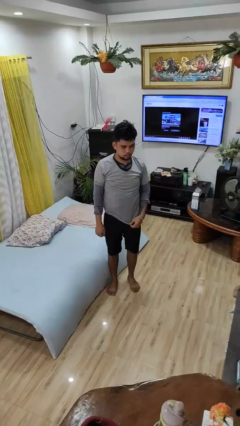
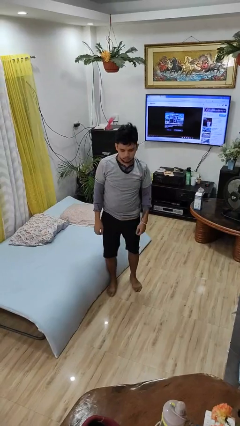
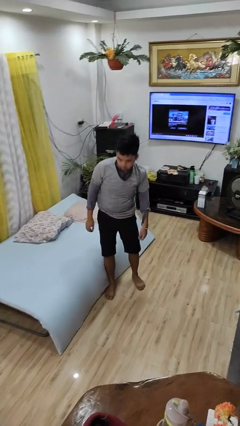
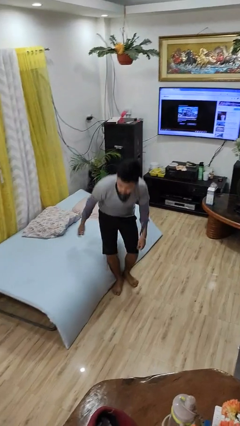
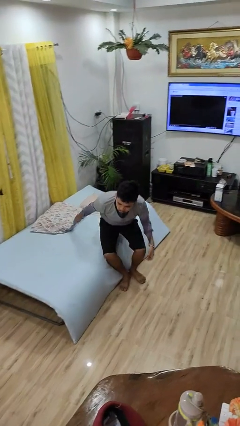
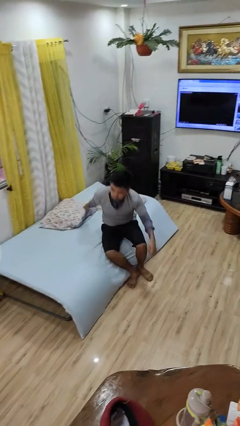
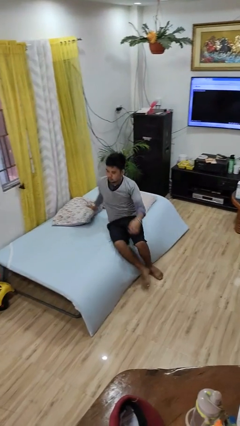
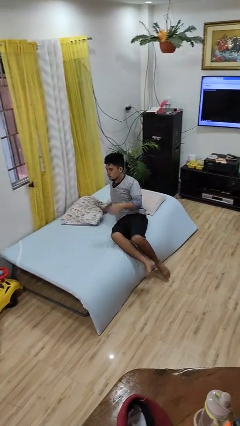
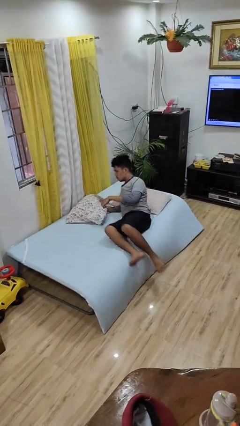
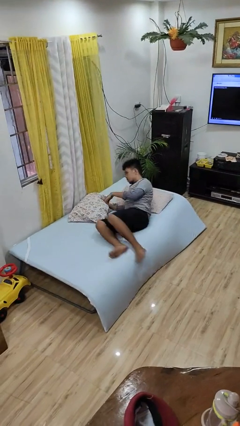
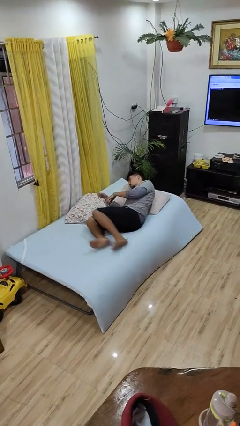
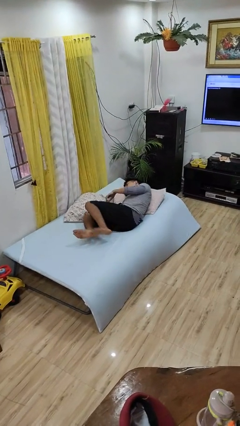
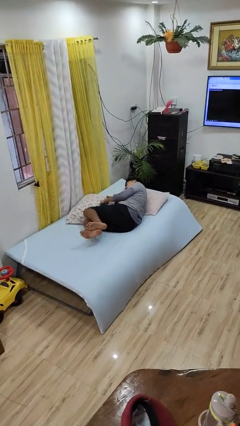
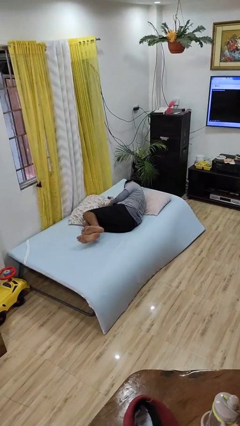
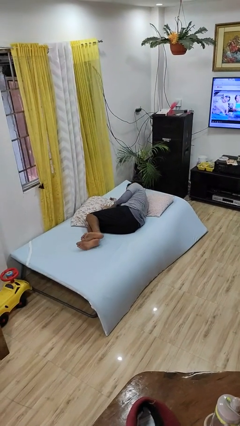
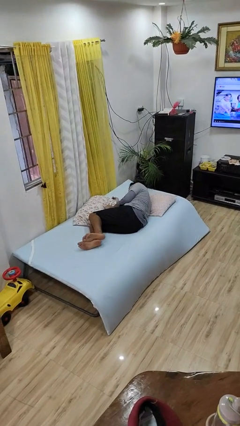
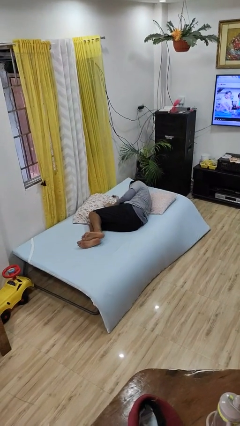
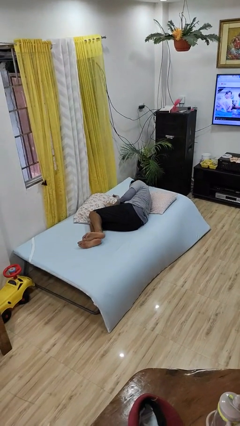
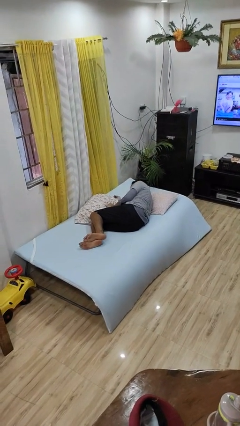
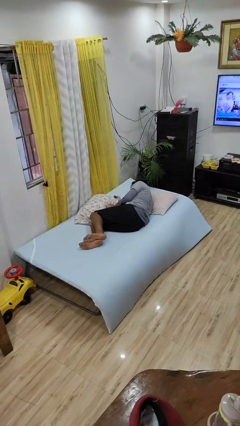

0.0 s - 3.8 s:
person lies down on bed

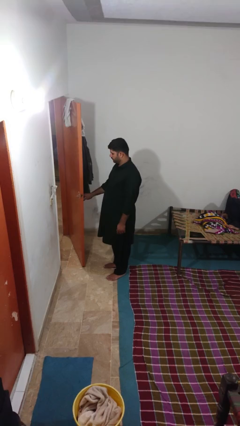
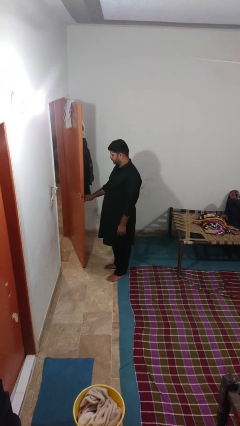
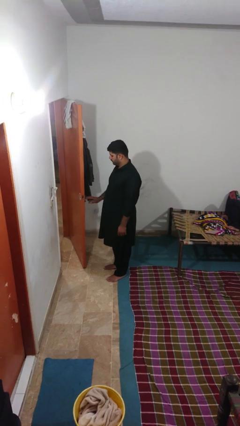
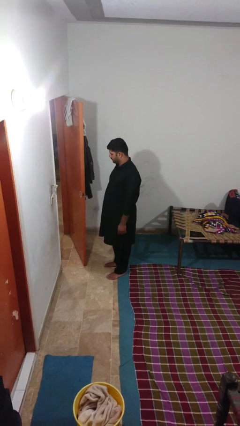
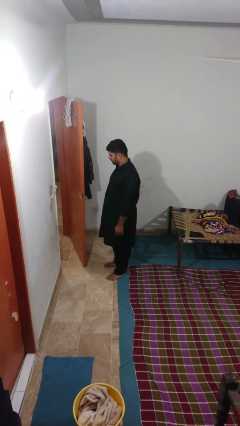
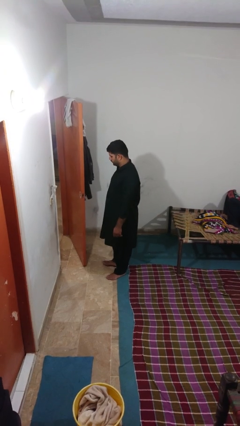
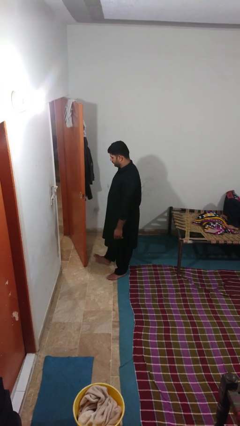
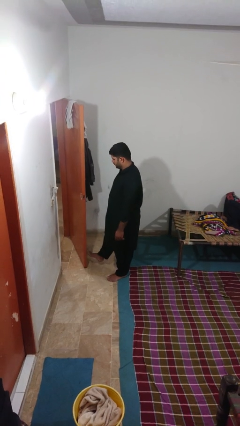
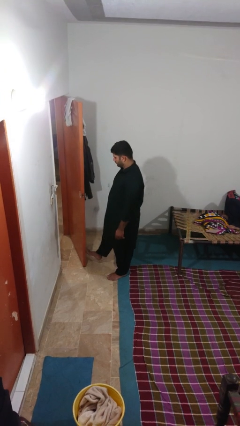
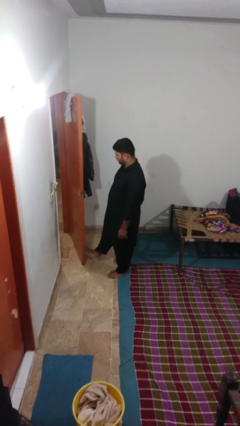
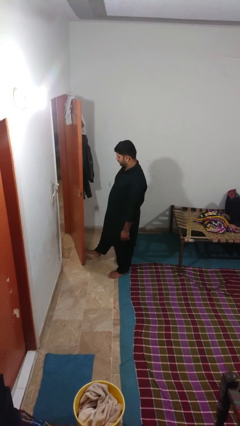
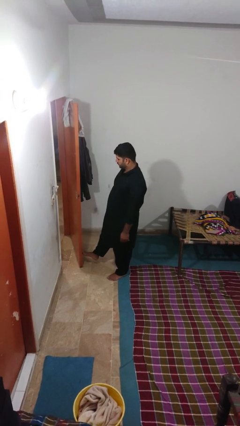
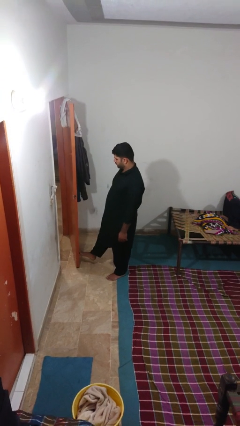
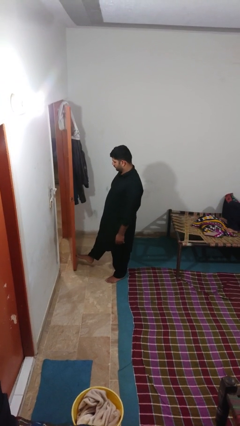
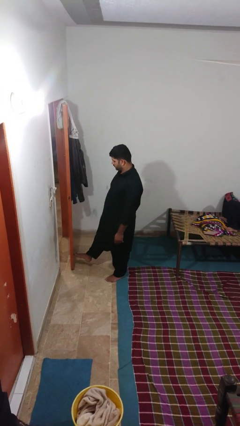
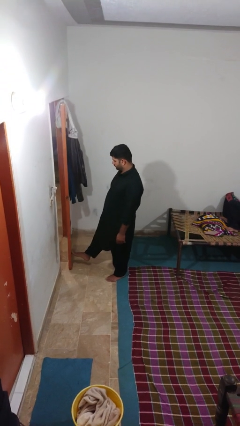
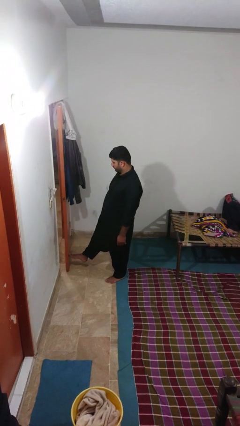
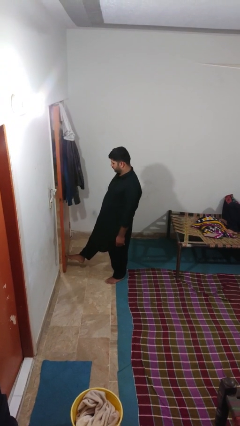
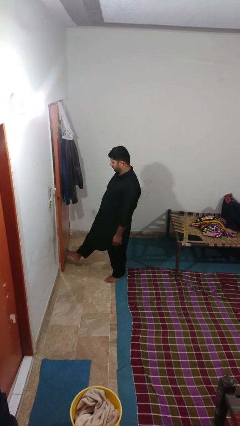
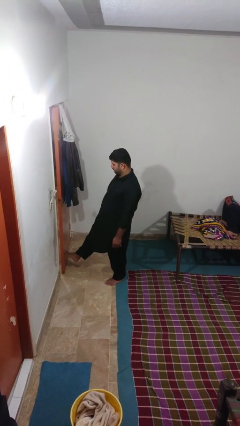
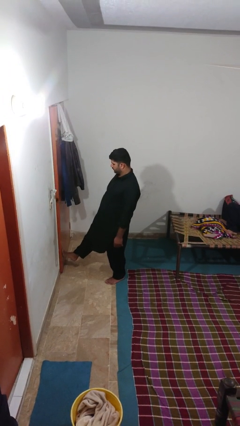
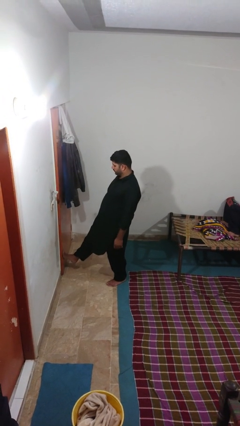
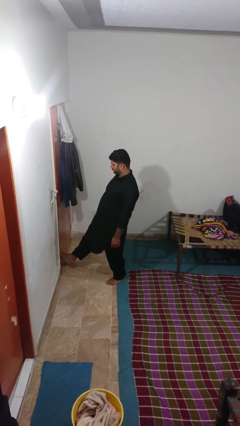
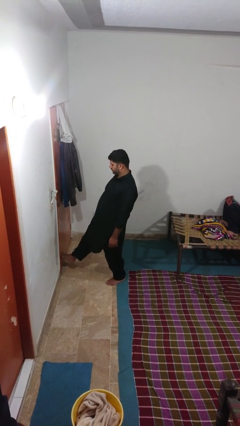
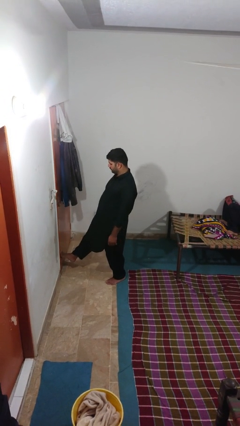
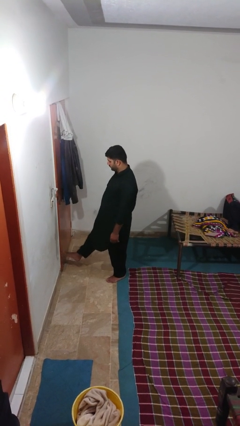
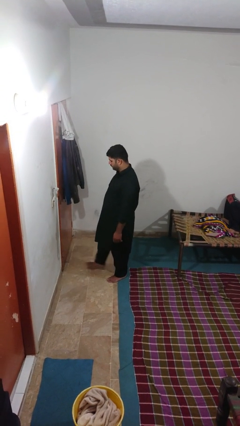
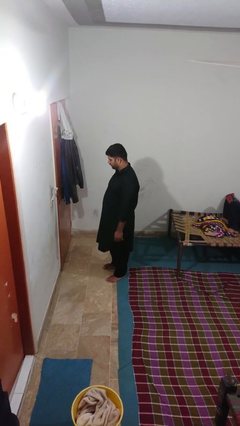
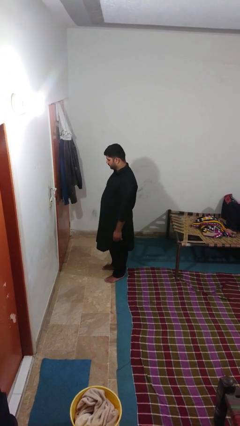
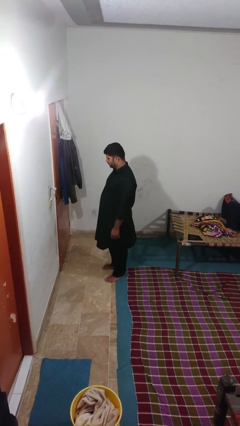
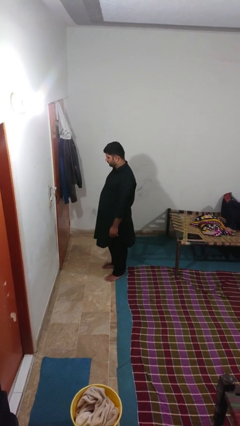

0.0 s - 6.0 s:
person closes door with foot

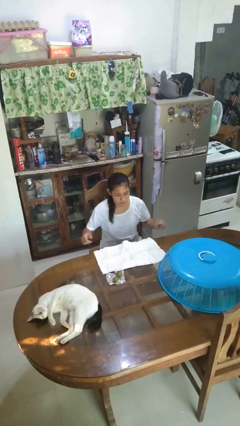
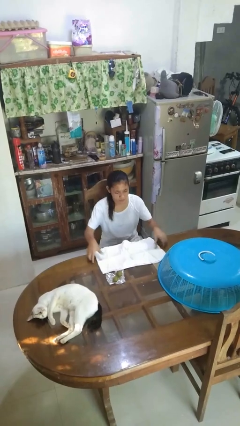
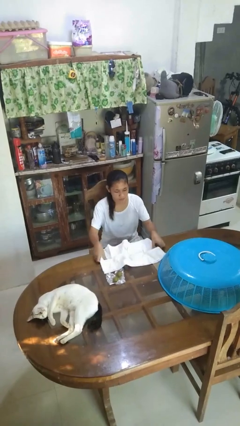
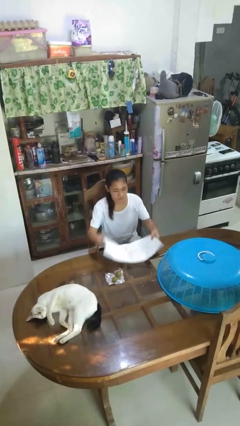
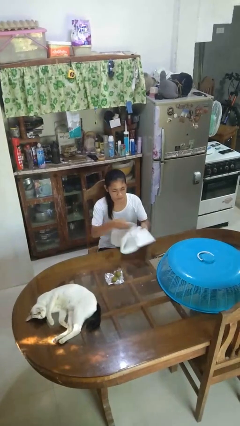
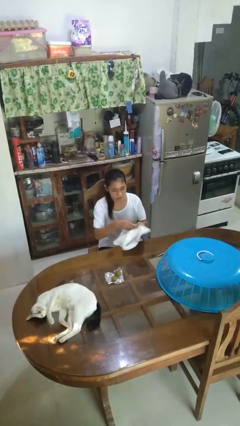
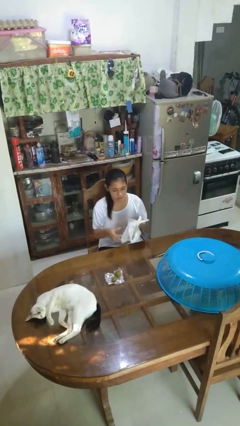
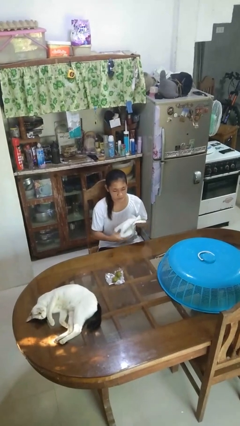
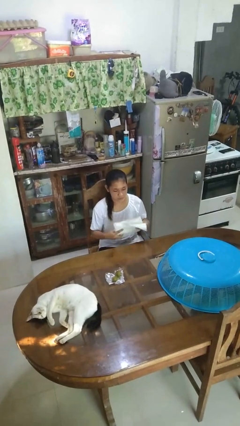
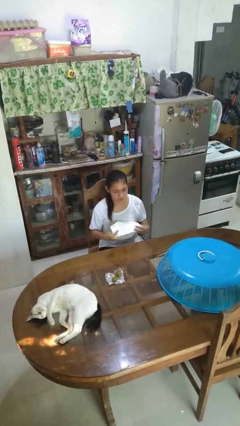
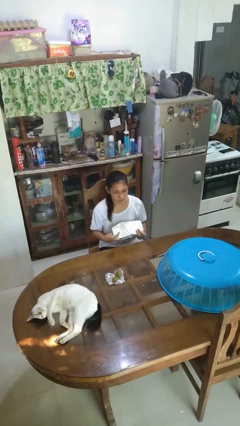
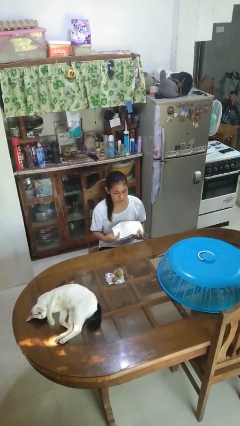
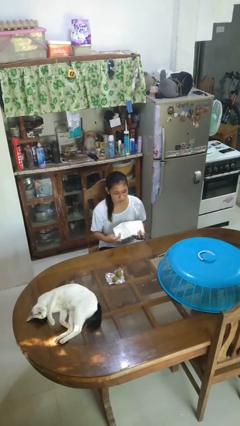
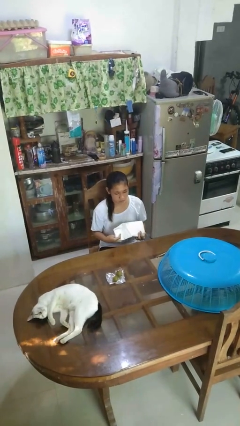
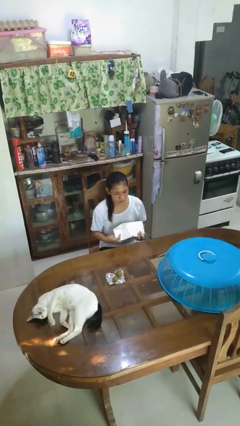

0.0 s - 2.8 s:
person folds tablecloth

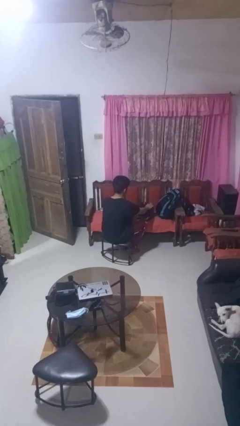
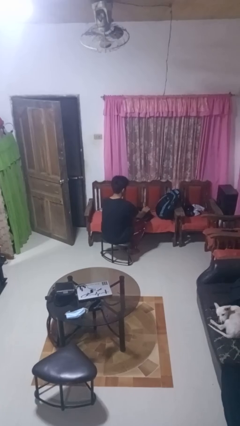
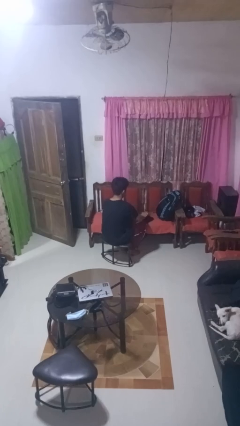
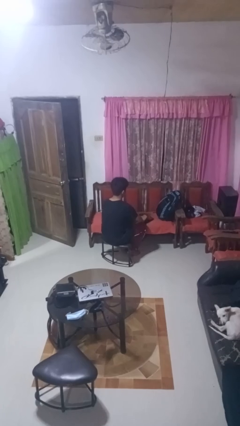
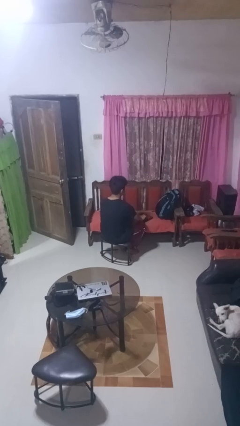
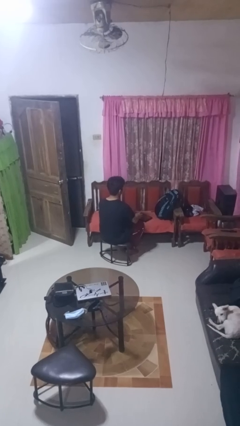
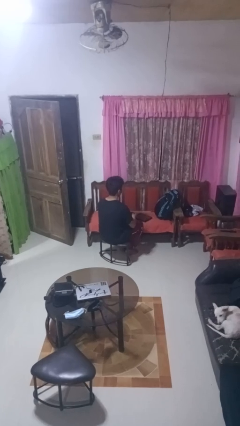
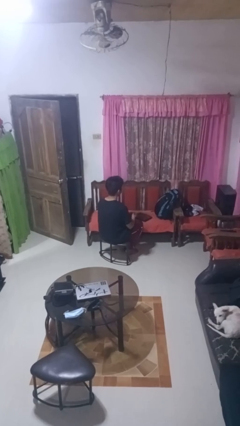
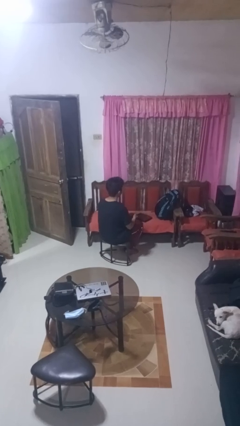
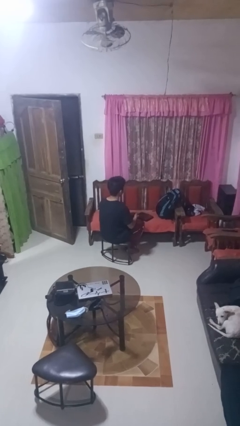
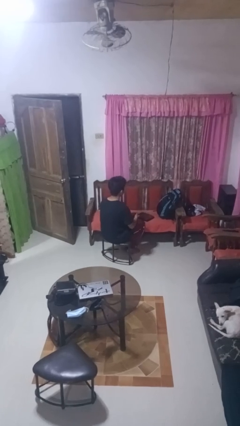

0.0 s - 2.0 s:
person closes laptop

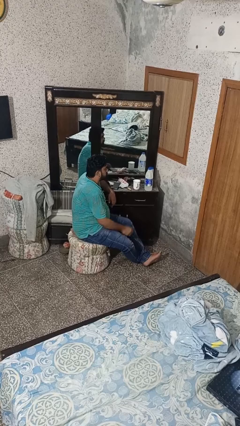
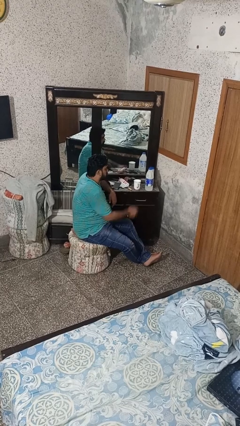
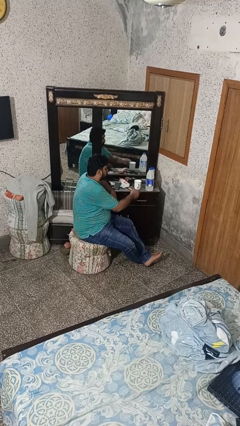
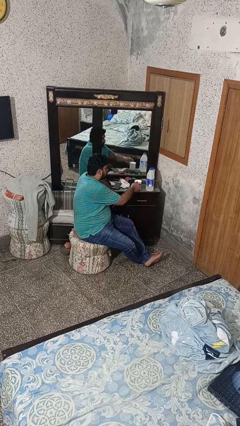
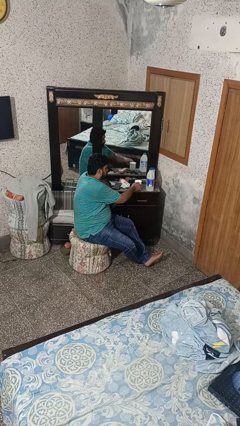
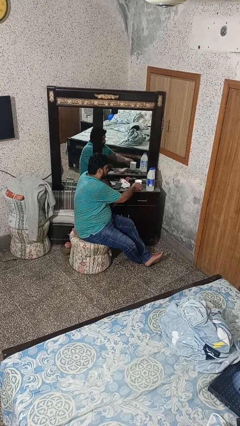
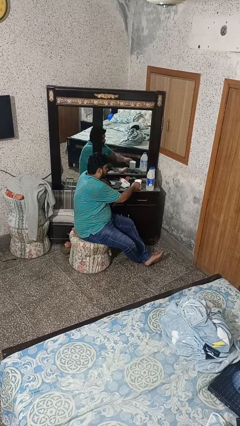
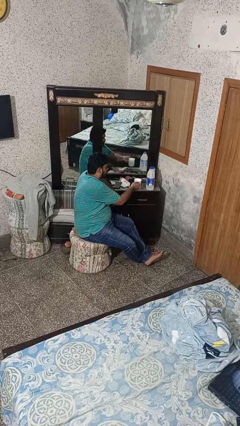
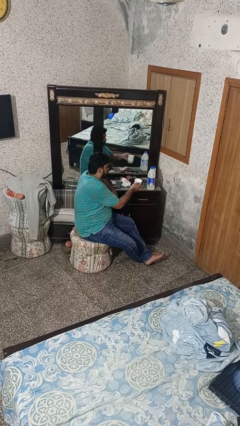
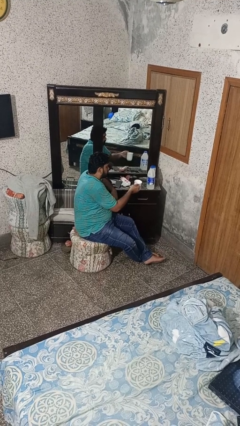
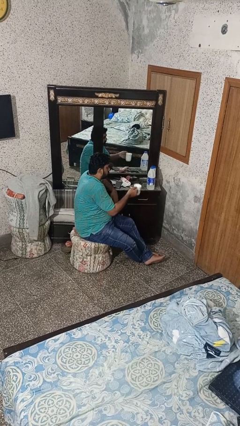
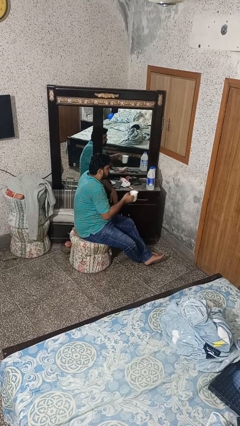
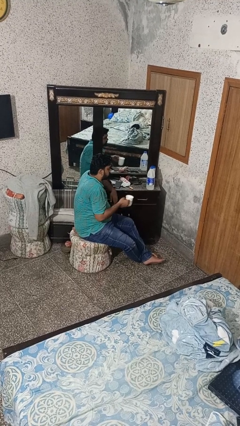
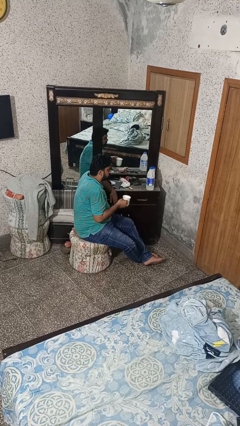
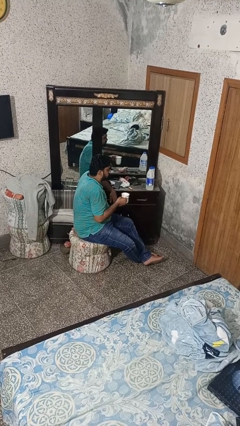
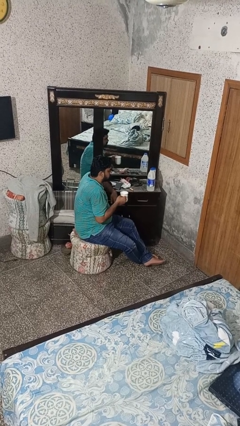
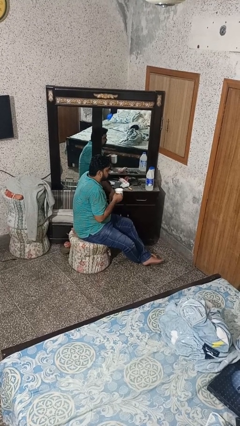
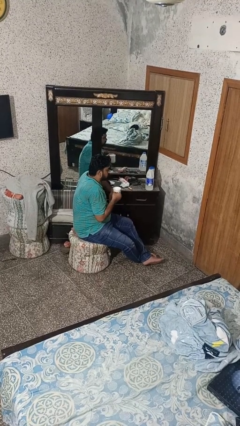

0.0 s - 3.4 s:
person picks up object from table
